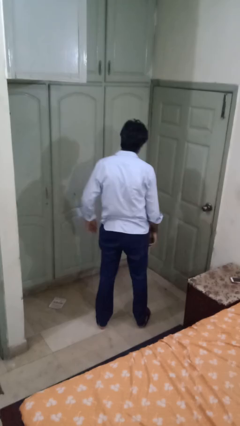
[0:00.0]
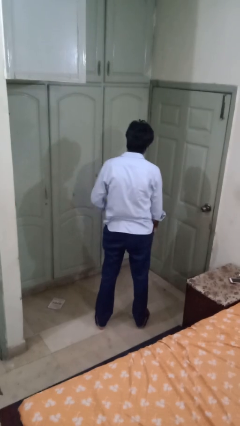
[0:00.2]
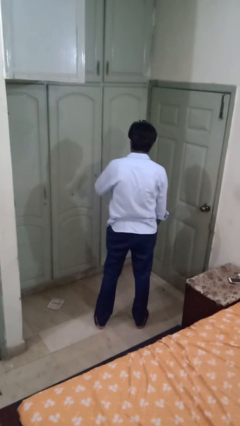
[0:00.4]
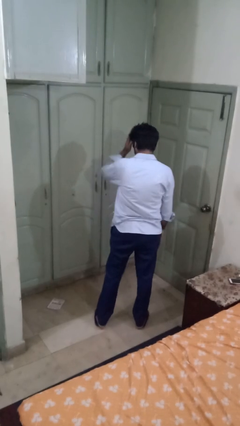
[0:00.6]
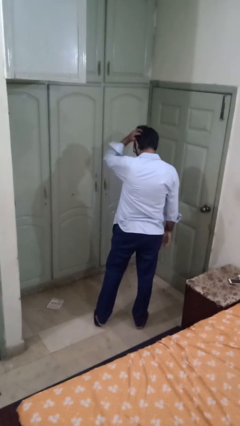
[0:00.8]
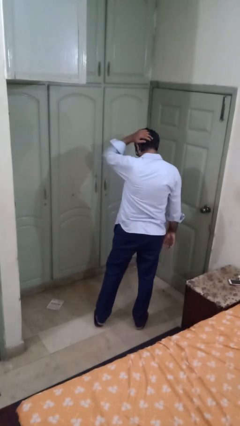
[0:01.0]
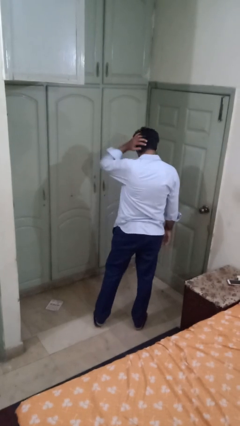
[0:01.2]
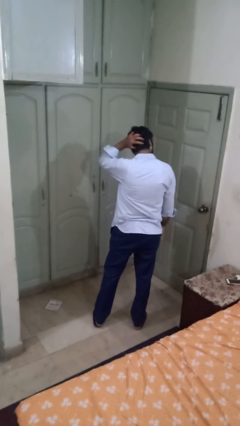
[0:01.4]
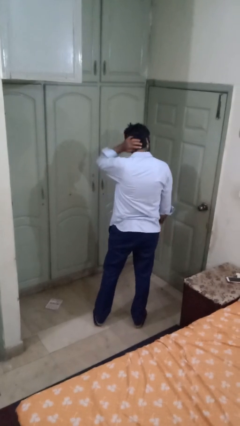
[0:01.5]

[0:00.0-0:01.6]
person strokes hair

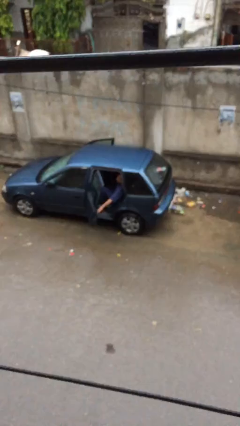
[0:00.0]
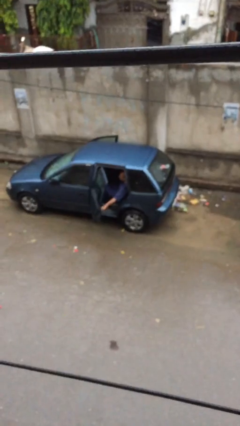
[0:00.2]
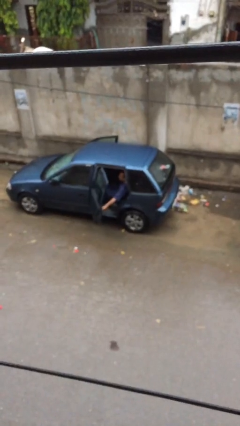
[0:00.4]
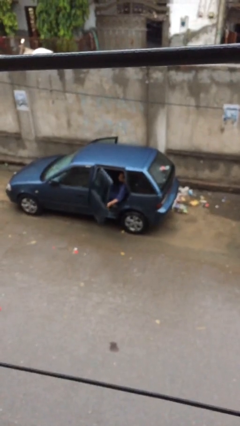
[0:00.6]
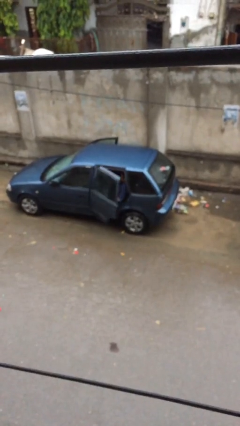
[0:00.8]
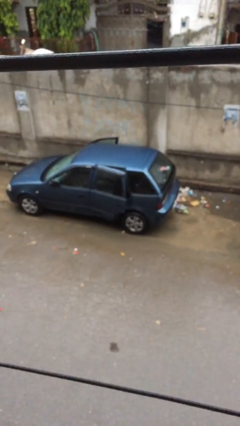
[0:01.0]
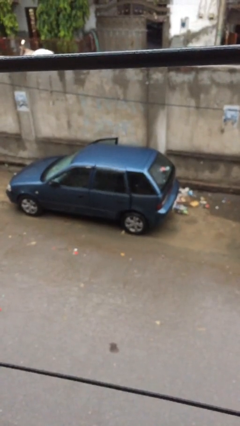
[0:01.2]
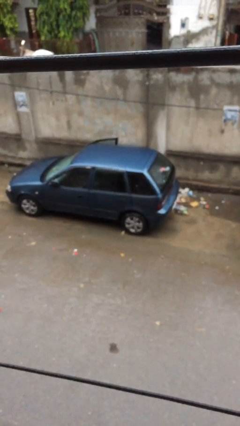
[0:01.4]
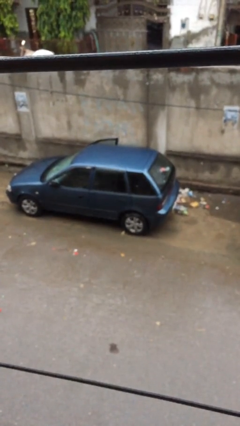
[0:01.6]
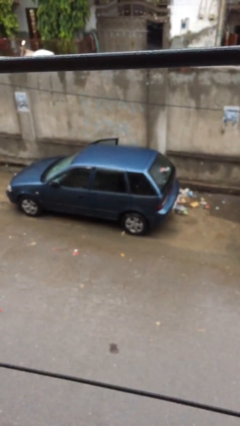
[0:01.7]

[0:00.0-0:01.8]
person closes car door

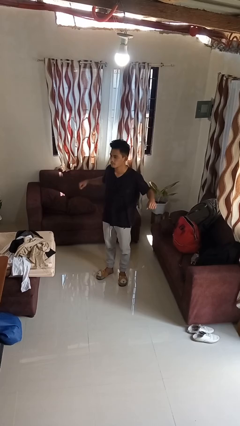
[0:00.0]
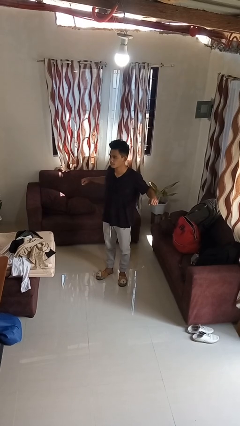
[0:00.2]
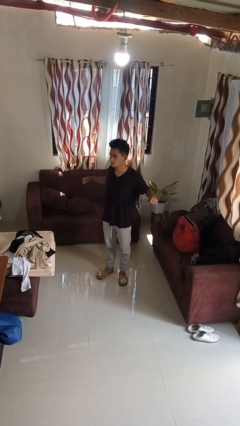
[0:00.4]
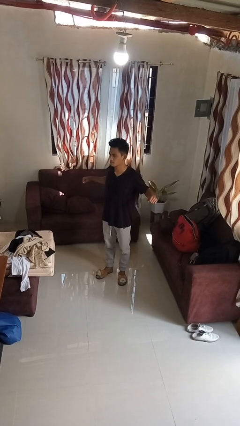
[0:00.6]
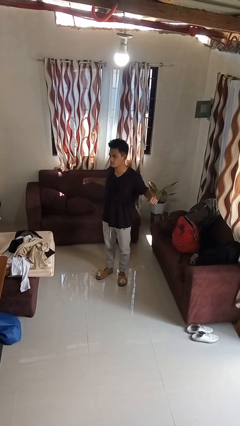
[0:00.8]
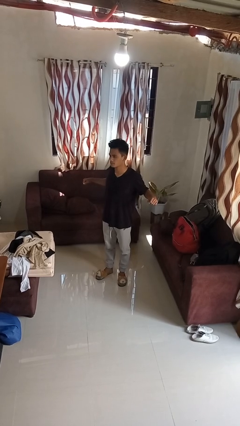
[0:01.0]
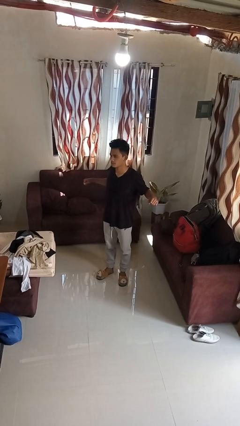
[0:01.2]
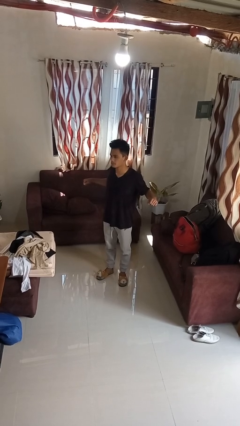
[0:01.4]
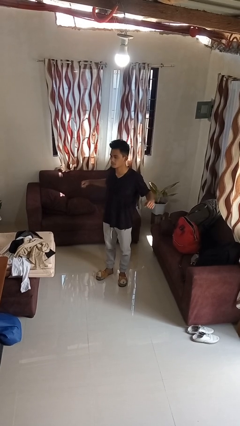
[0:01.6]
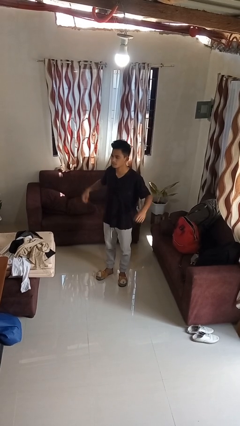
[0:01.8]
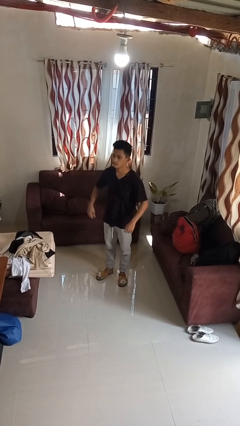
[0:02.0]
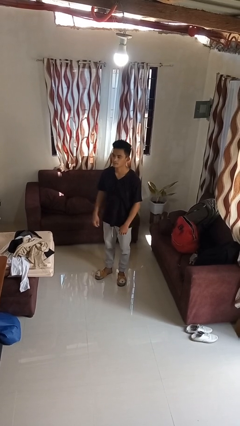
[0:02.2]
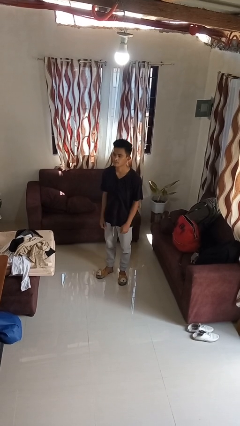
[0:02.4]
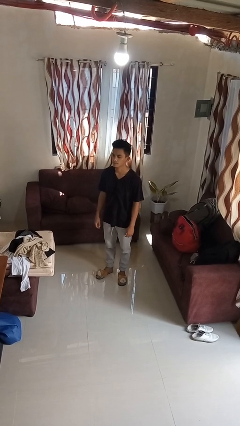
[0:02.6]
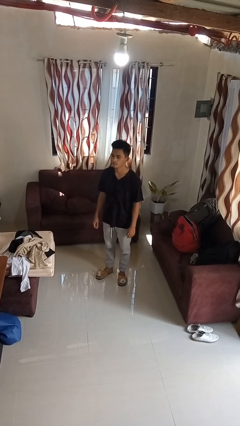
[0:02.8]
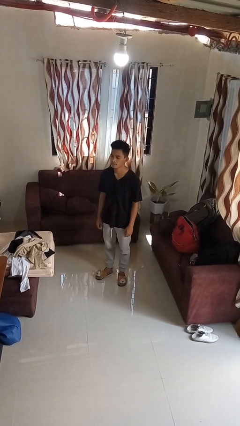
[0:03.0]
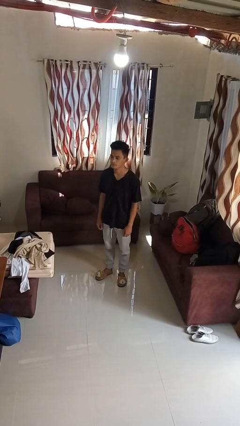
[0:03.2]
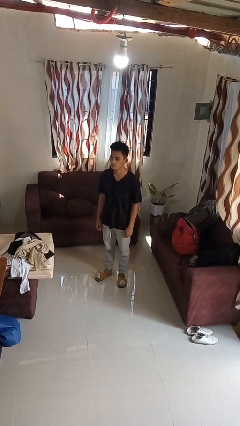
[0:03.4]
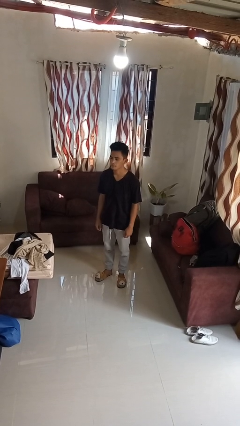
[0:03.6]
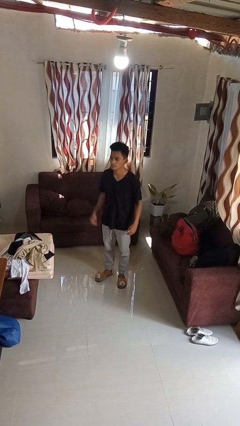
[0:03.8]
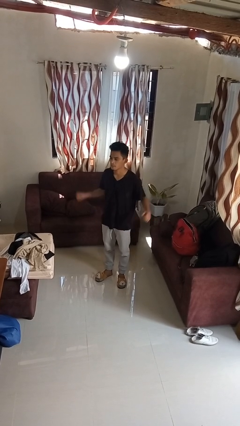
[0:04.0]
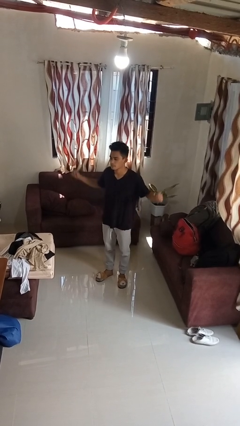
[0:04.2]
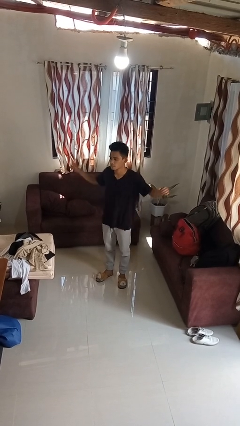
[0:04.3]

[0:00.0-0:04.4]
person stretches back

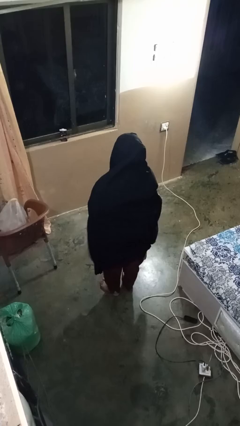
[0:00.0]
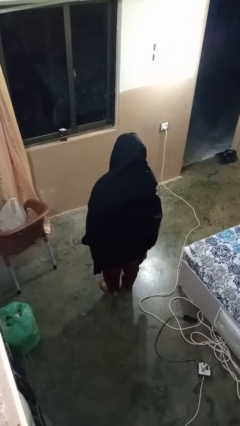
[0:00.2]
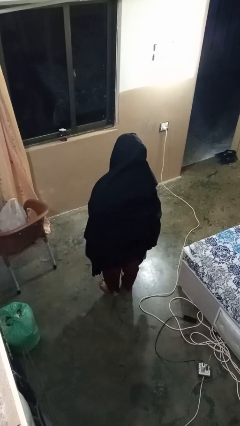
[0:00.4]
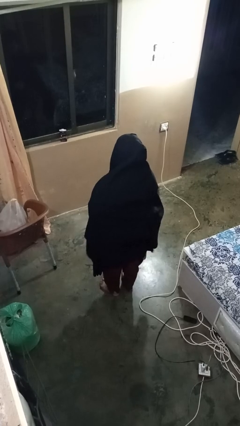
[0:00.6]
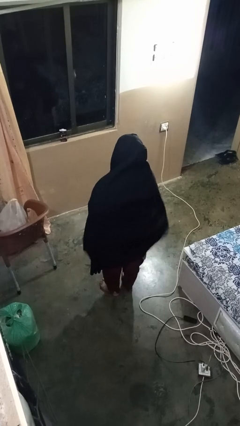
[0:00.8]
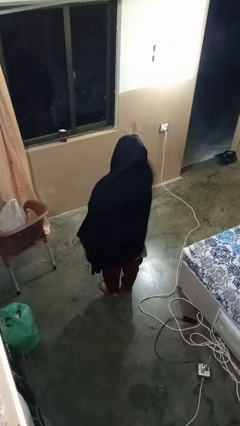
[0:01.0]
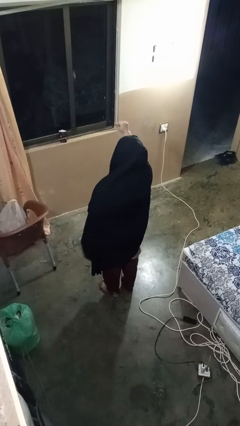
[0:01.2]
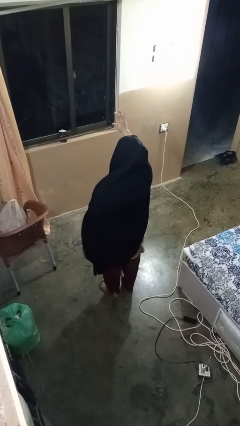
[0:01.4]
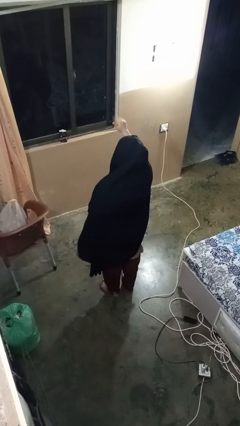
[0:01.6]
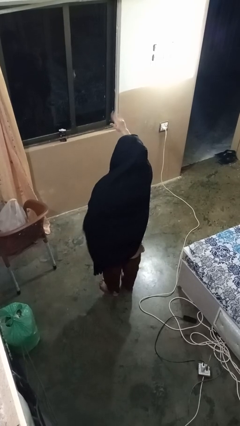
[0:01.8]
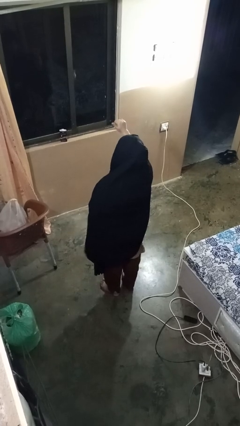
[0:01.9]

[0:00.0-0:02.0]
person gestures come here

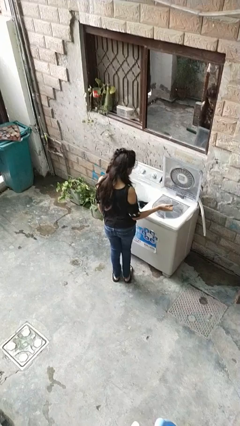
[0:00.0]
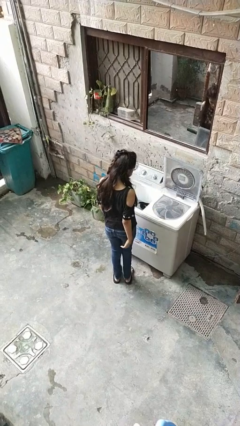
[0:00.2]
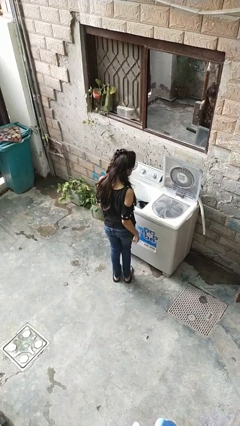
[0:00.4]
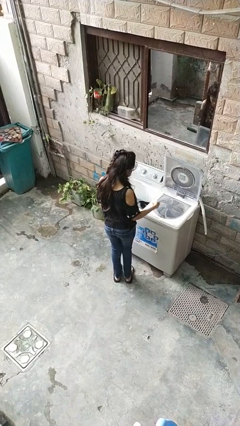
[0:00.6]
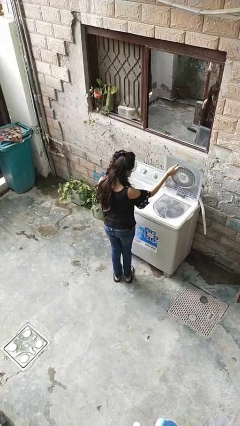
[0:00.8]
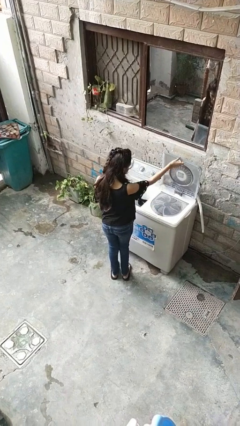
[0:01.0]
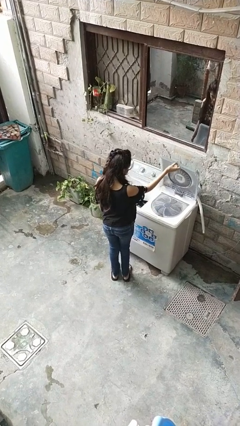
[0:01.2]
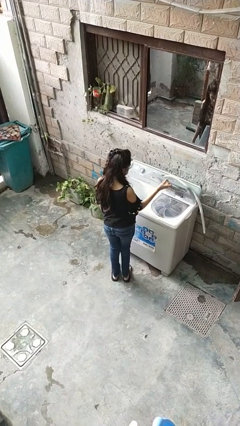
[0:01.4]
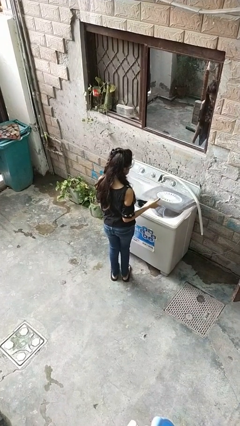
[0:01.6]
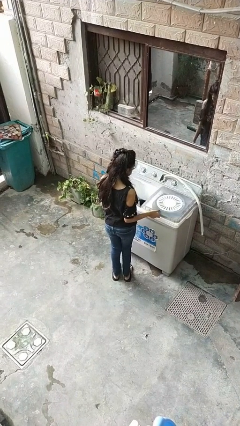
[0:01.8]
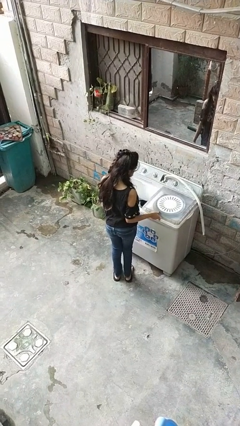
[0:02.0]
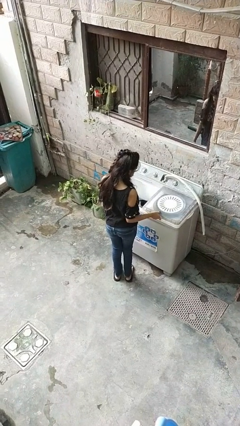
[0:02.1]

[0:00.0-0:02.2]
person closes clothes washer

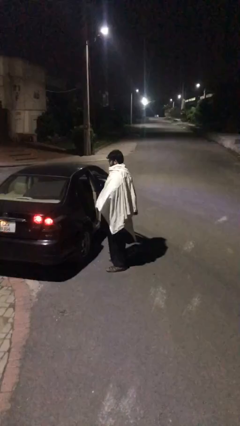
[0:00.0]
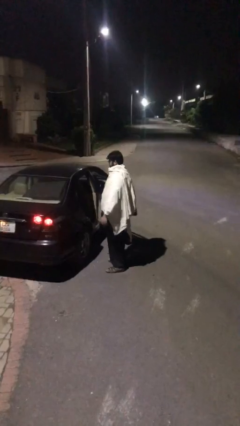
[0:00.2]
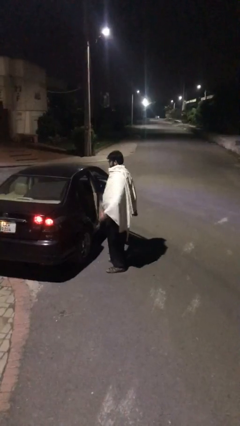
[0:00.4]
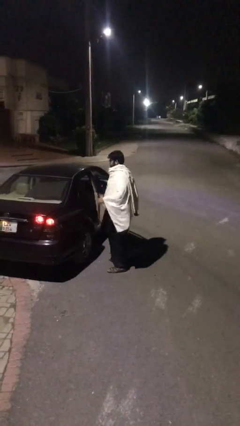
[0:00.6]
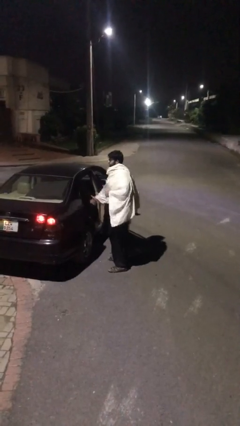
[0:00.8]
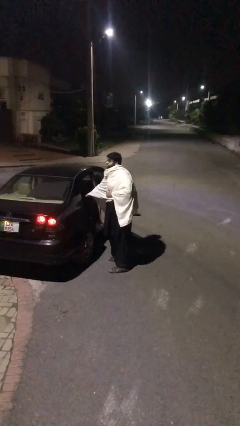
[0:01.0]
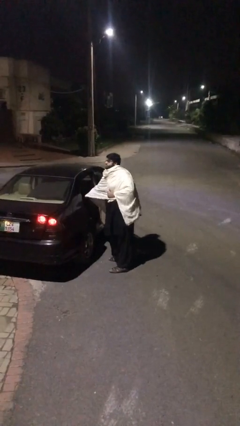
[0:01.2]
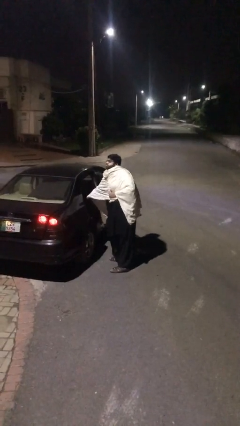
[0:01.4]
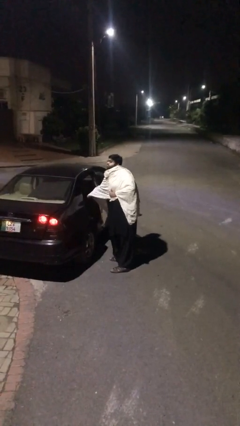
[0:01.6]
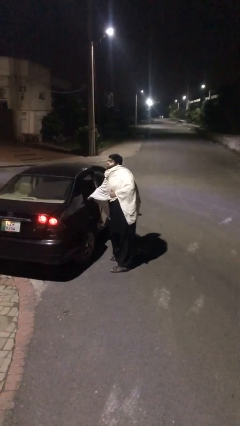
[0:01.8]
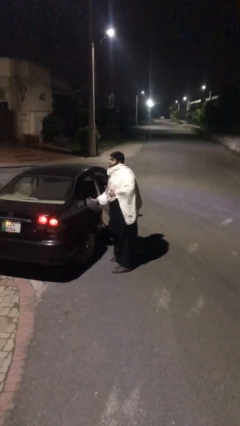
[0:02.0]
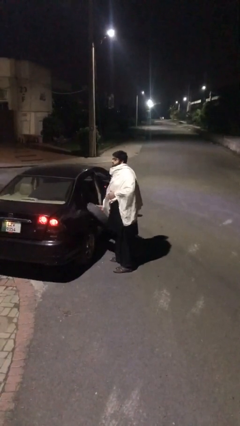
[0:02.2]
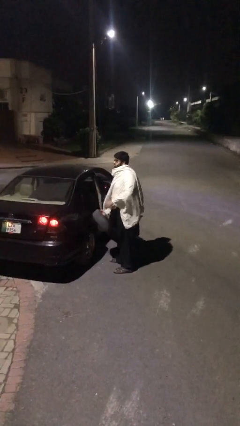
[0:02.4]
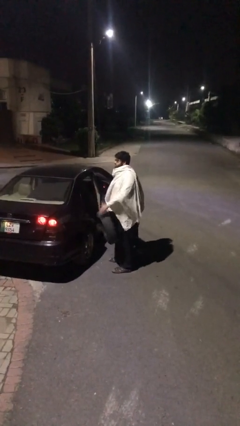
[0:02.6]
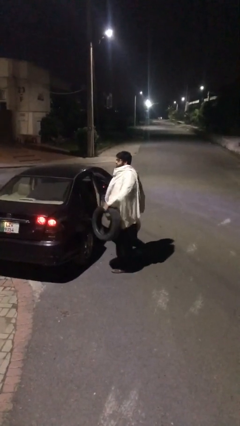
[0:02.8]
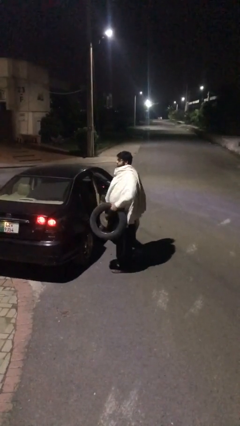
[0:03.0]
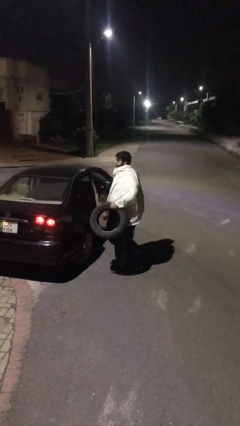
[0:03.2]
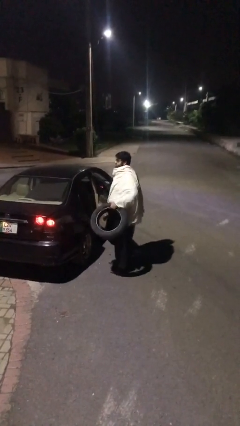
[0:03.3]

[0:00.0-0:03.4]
person unloads car

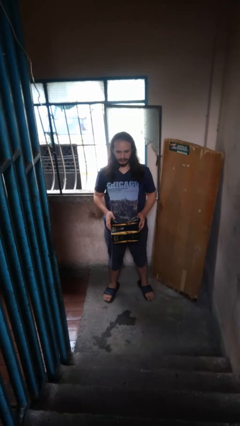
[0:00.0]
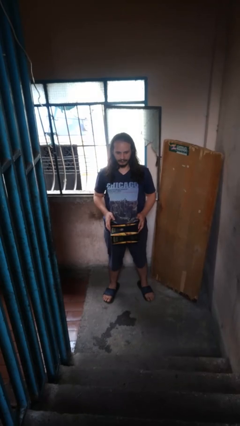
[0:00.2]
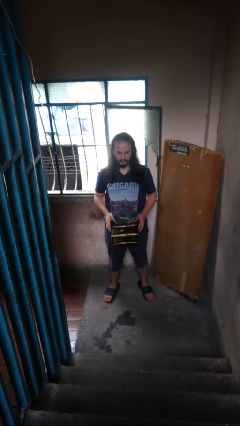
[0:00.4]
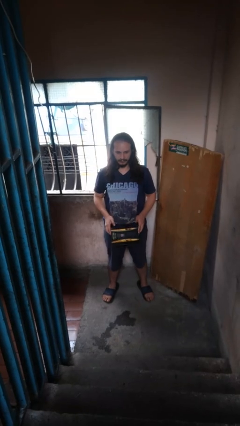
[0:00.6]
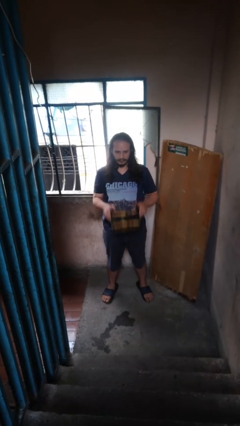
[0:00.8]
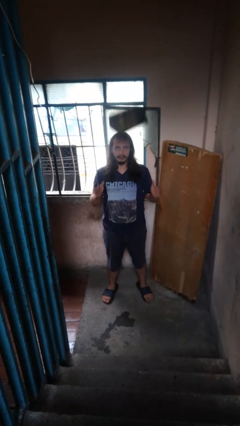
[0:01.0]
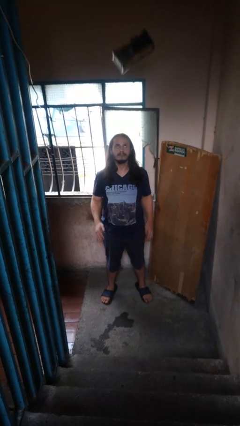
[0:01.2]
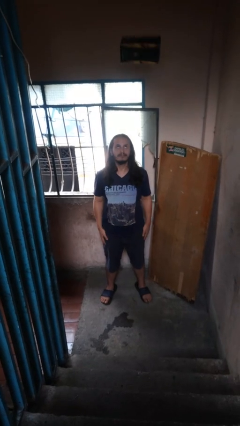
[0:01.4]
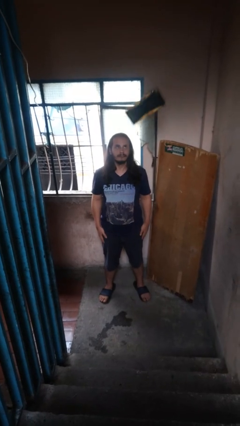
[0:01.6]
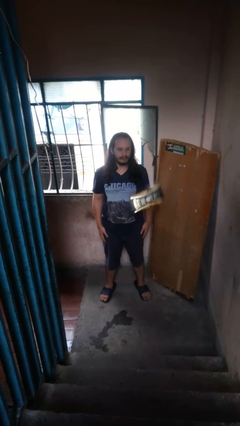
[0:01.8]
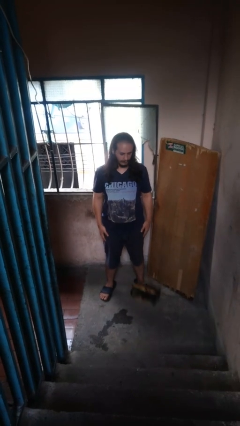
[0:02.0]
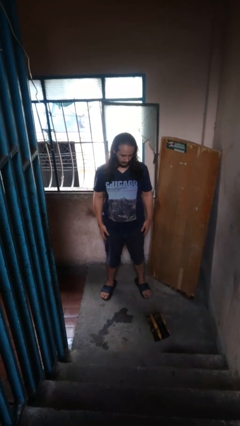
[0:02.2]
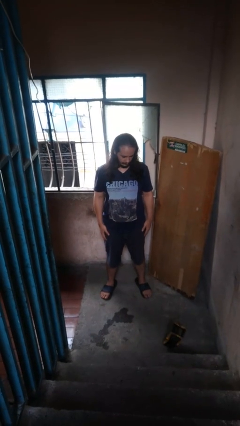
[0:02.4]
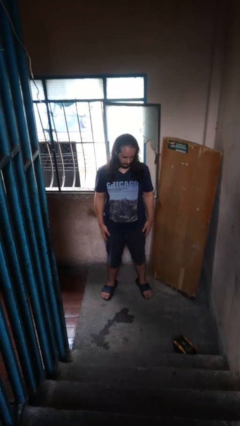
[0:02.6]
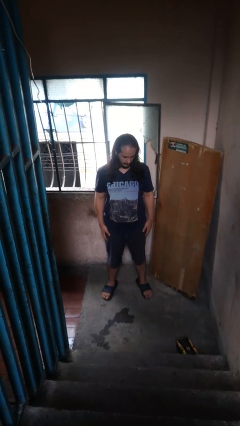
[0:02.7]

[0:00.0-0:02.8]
person throws object into air
